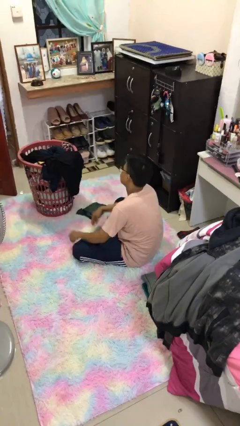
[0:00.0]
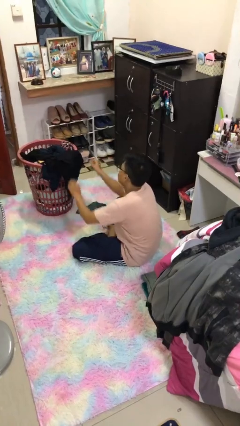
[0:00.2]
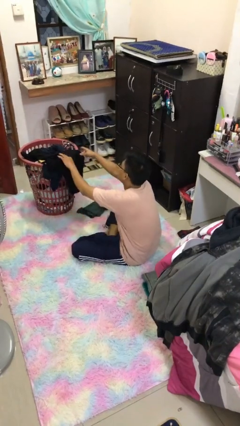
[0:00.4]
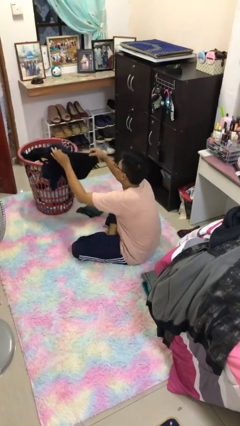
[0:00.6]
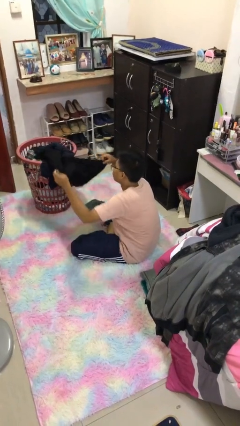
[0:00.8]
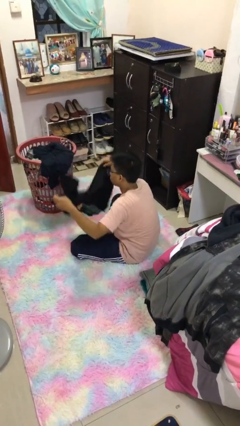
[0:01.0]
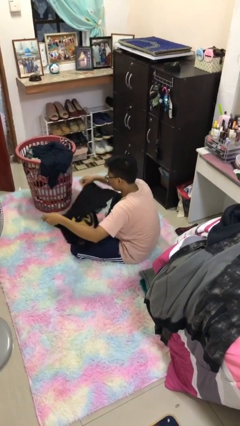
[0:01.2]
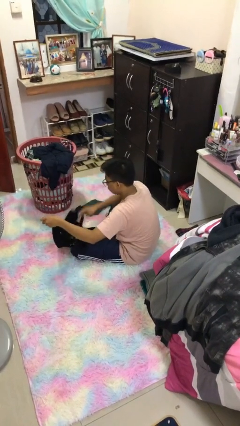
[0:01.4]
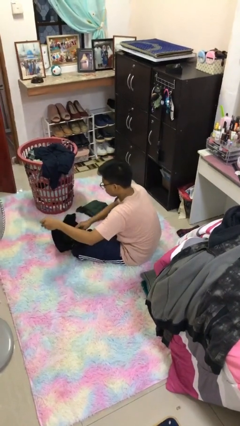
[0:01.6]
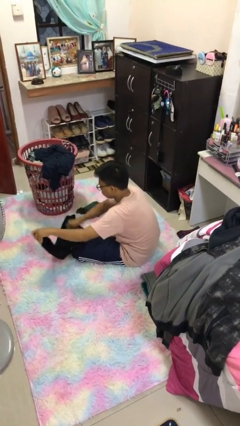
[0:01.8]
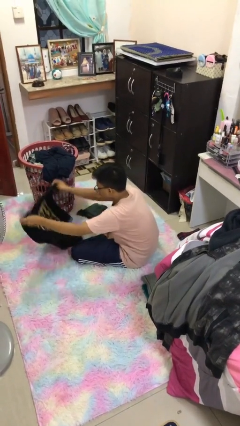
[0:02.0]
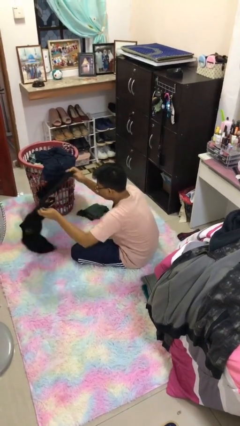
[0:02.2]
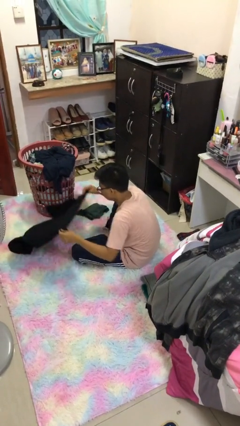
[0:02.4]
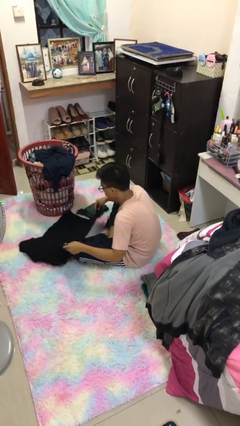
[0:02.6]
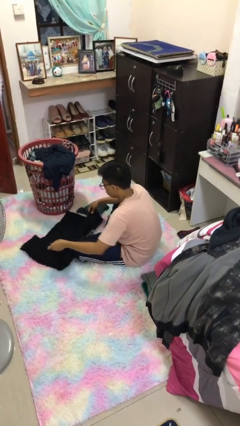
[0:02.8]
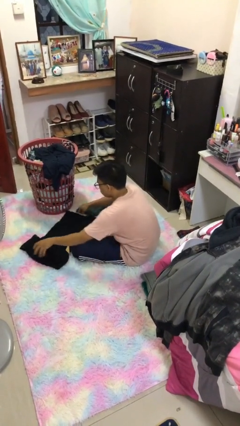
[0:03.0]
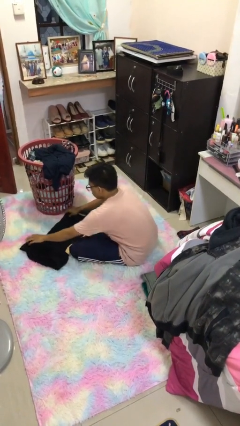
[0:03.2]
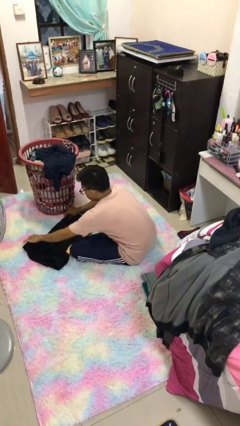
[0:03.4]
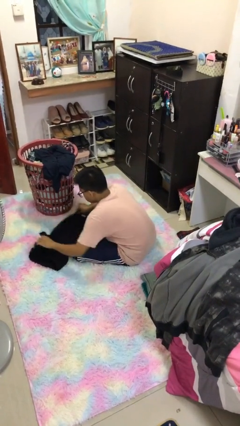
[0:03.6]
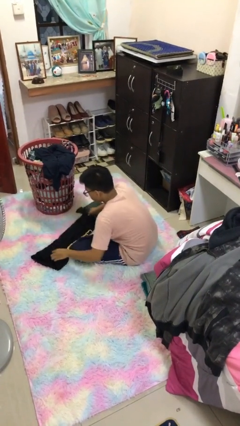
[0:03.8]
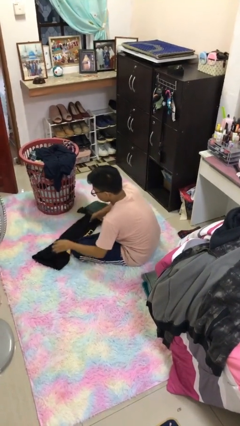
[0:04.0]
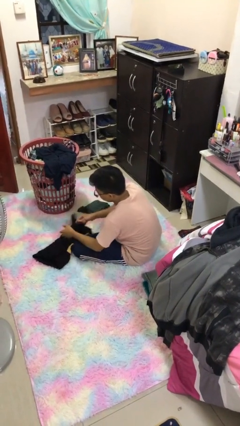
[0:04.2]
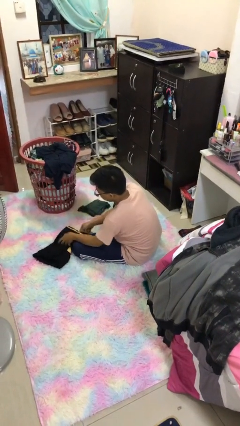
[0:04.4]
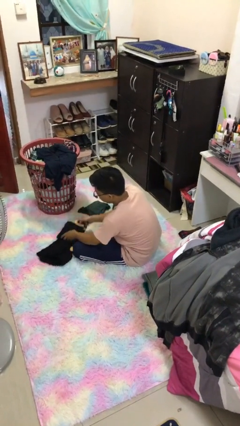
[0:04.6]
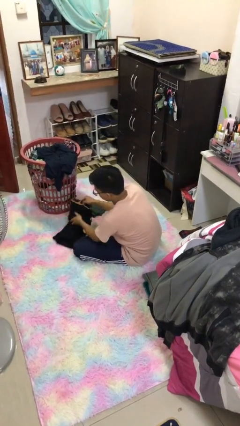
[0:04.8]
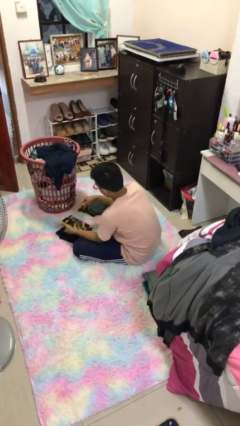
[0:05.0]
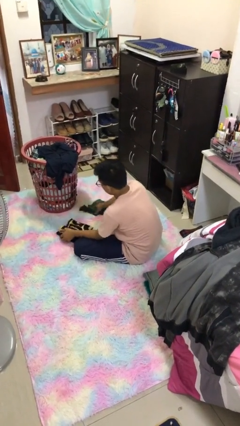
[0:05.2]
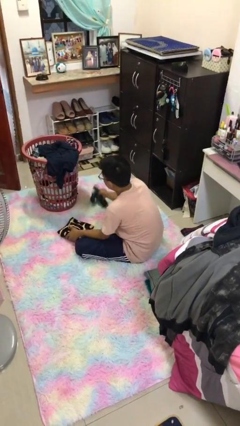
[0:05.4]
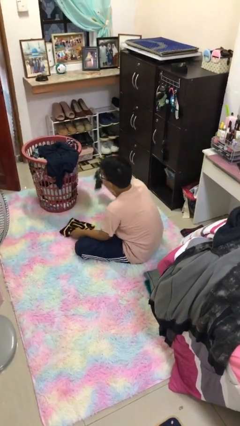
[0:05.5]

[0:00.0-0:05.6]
person folds shirt

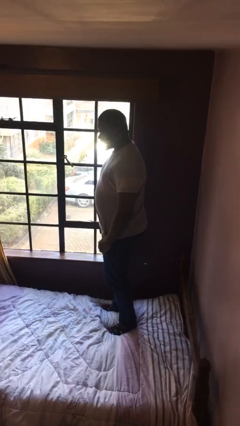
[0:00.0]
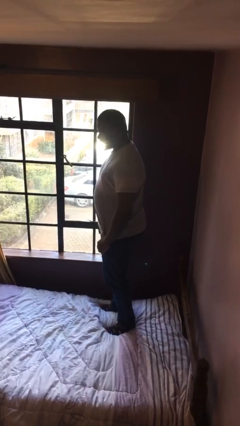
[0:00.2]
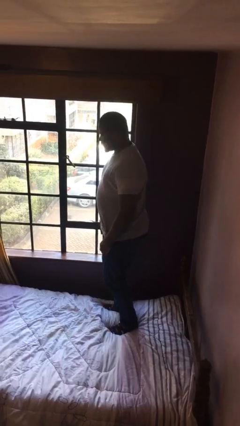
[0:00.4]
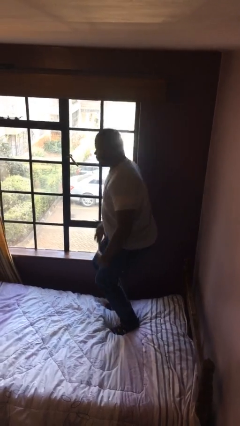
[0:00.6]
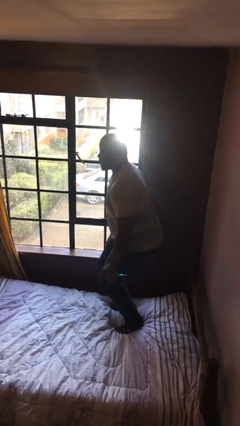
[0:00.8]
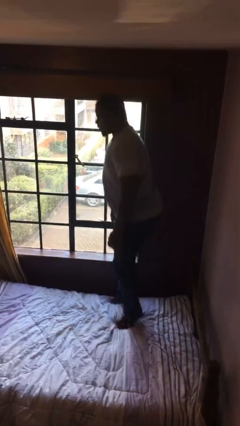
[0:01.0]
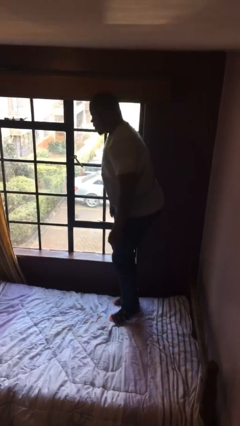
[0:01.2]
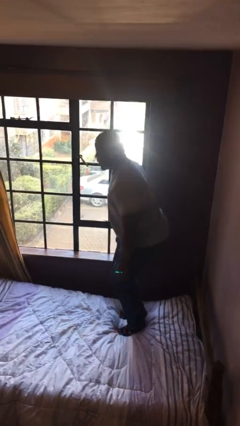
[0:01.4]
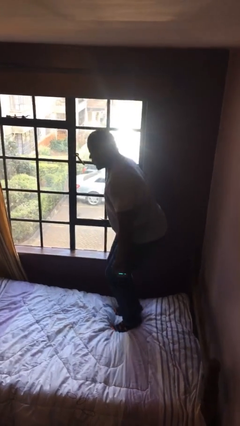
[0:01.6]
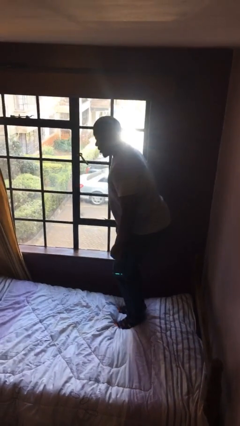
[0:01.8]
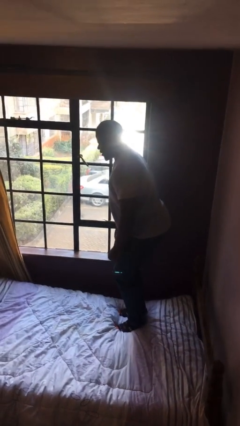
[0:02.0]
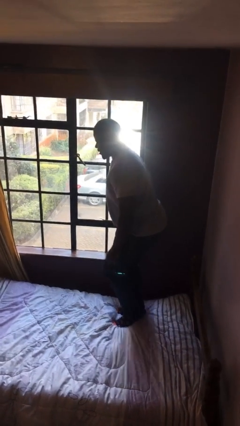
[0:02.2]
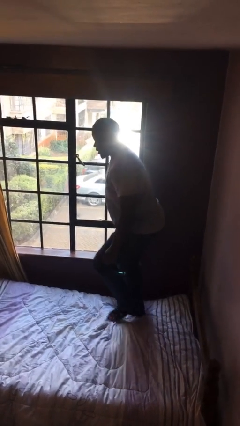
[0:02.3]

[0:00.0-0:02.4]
person jumps on bed

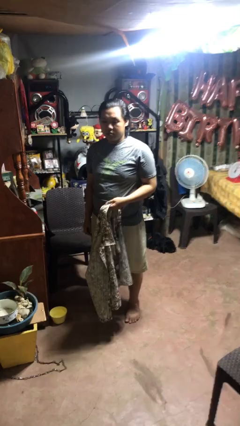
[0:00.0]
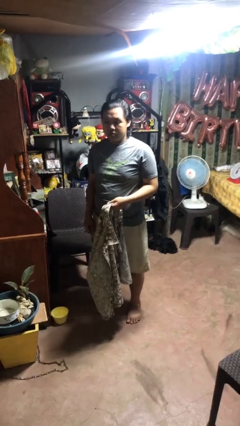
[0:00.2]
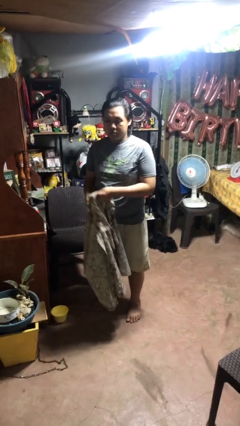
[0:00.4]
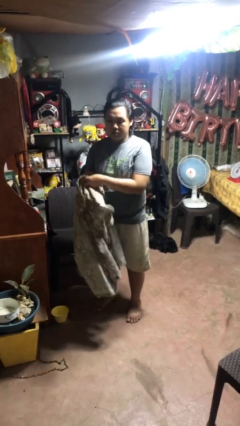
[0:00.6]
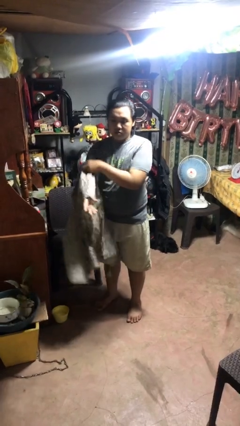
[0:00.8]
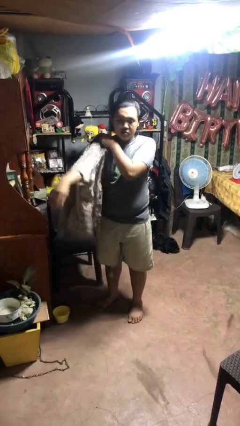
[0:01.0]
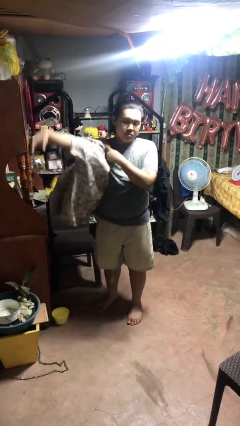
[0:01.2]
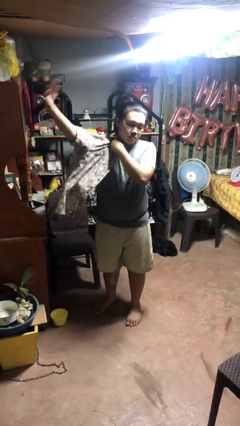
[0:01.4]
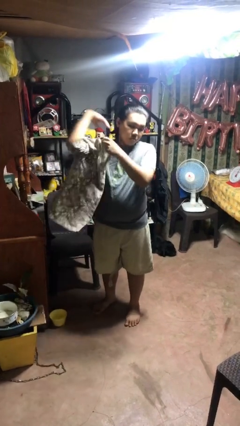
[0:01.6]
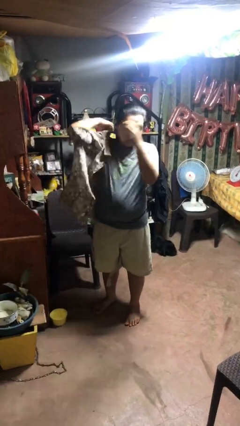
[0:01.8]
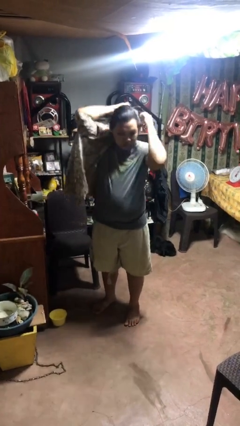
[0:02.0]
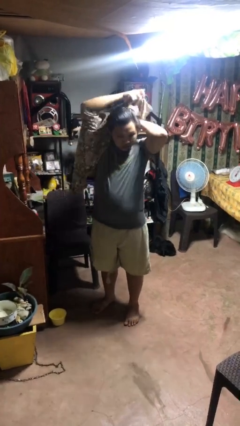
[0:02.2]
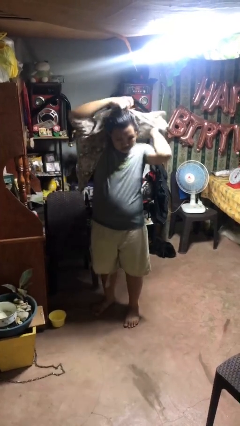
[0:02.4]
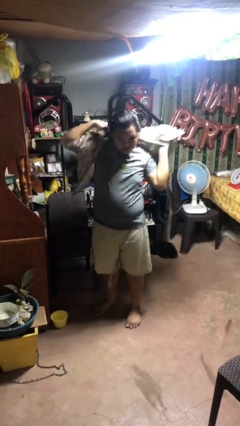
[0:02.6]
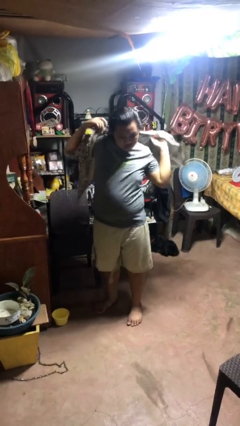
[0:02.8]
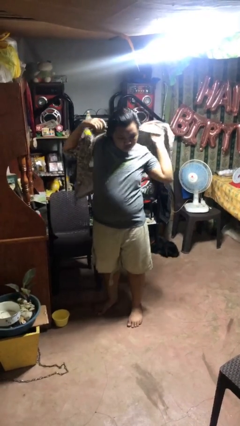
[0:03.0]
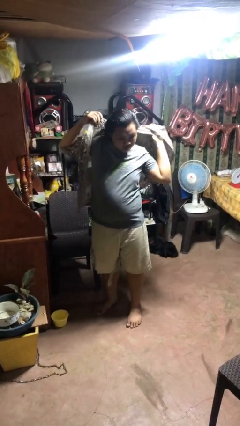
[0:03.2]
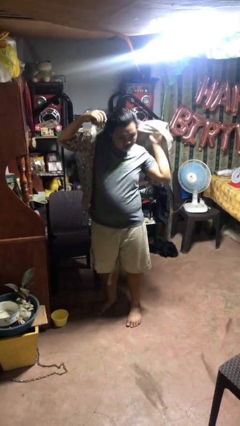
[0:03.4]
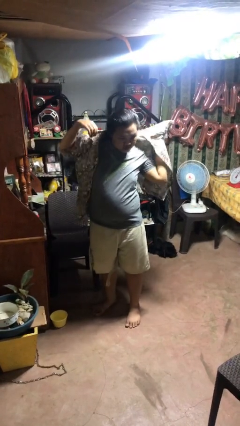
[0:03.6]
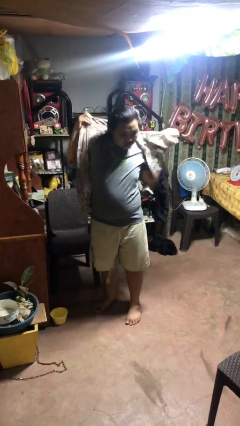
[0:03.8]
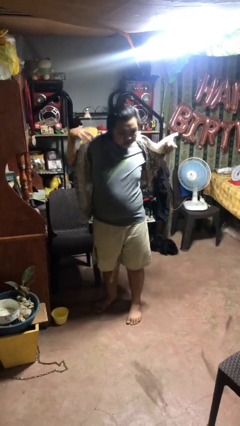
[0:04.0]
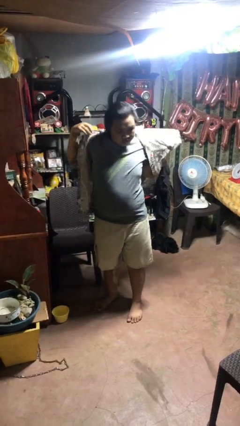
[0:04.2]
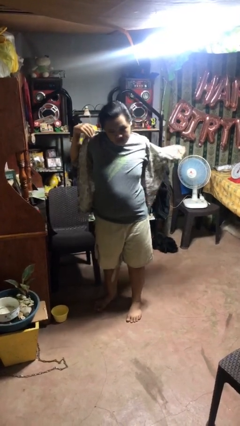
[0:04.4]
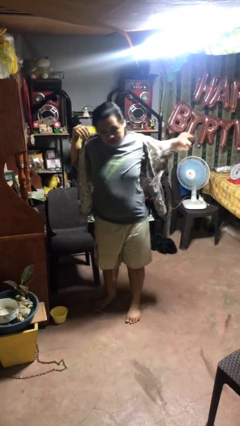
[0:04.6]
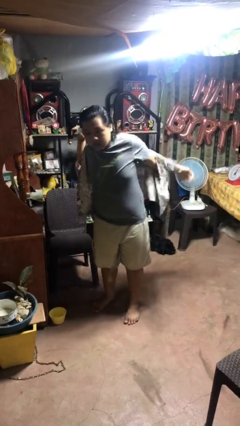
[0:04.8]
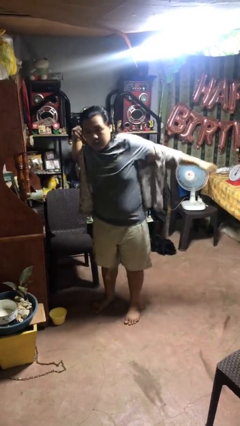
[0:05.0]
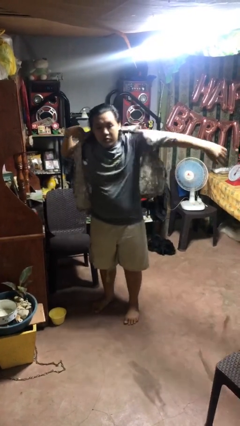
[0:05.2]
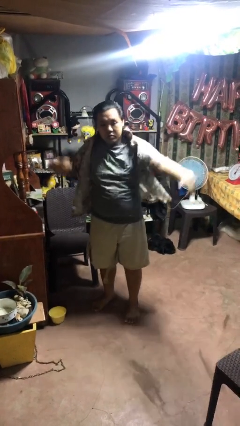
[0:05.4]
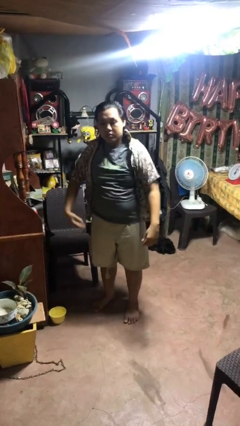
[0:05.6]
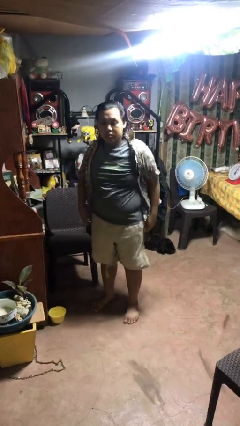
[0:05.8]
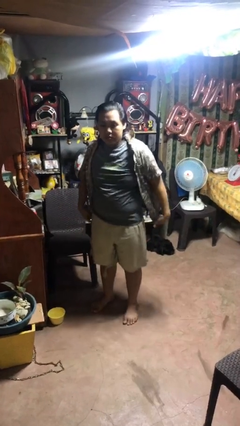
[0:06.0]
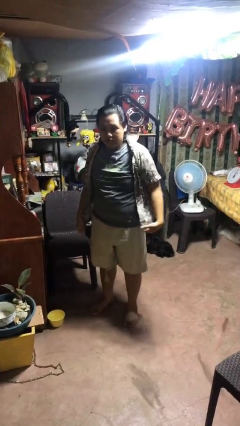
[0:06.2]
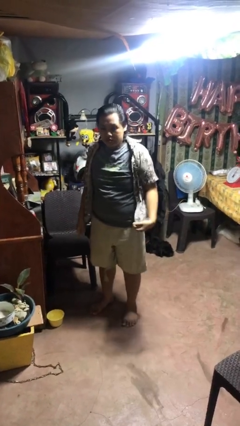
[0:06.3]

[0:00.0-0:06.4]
person puts on shirt

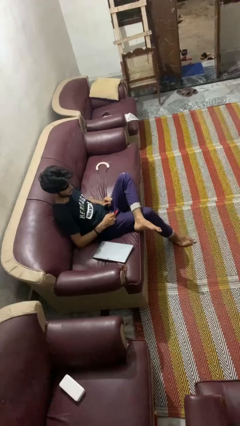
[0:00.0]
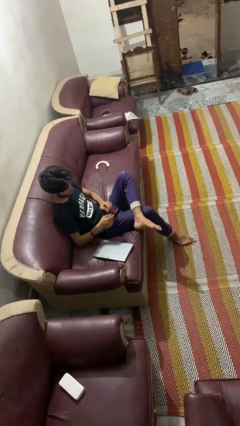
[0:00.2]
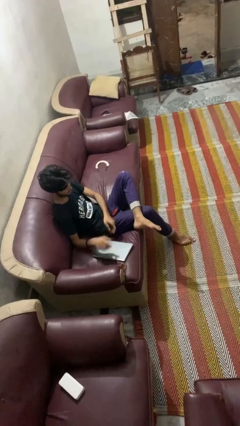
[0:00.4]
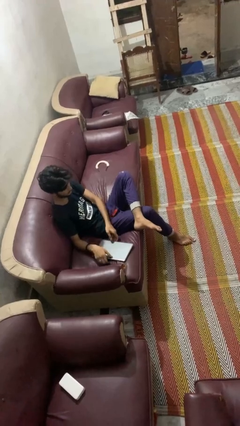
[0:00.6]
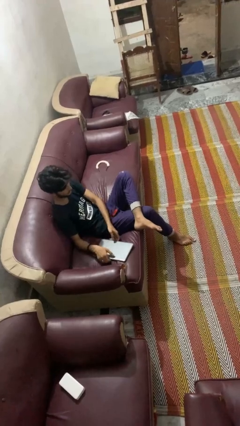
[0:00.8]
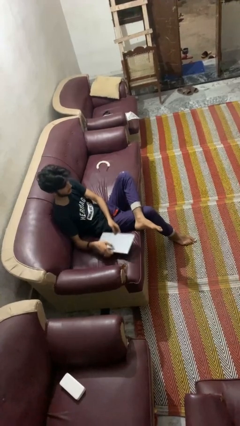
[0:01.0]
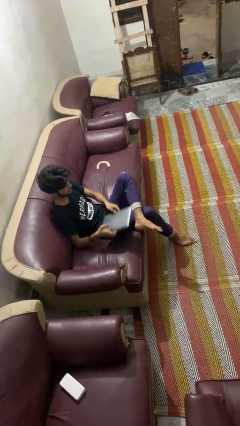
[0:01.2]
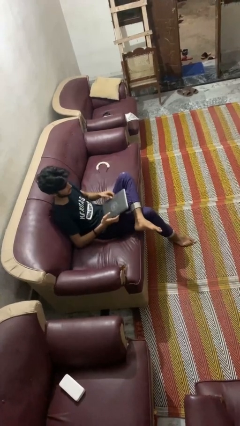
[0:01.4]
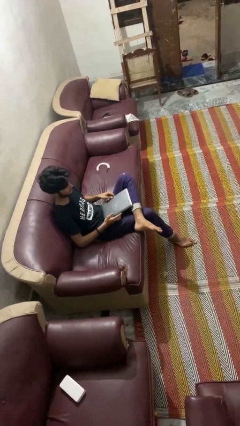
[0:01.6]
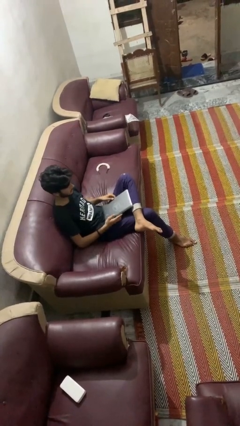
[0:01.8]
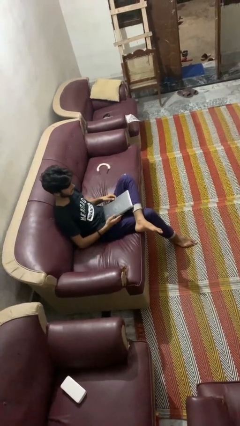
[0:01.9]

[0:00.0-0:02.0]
person picks up object from couch

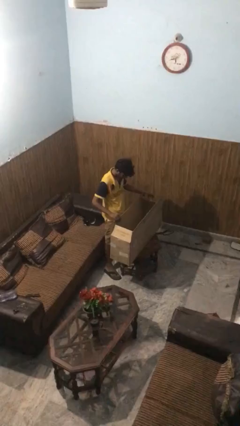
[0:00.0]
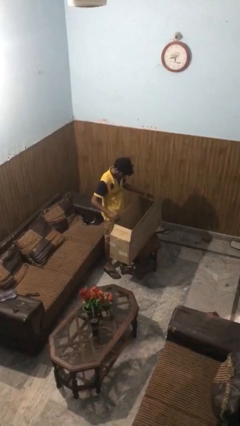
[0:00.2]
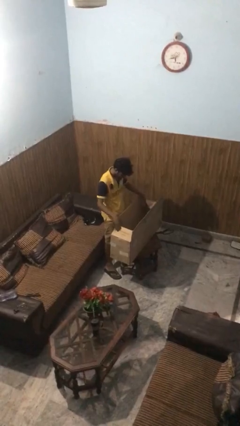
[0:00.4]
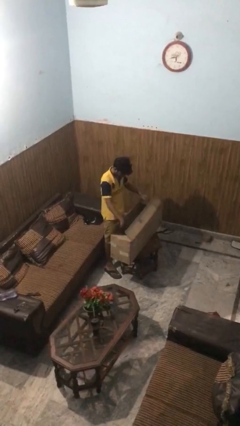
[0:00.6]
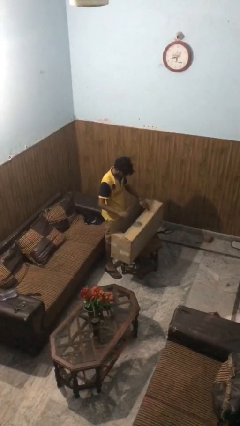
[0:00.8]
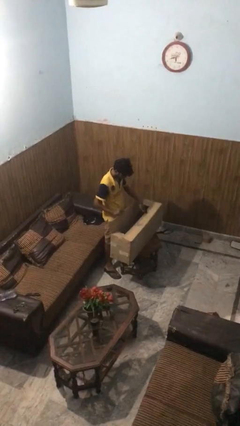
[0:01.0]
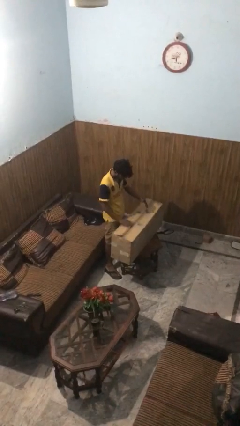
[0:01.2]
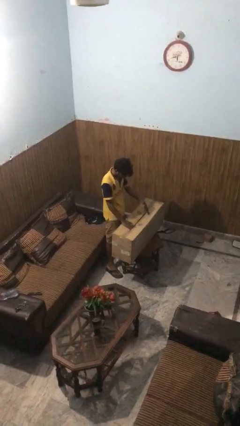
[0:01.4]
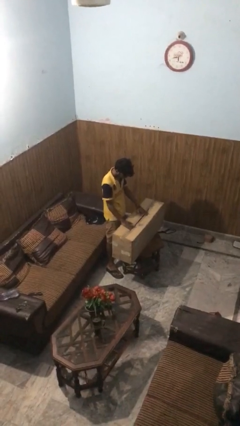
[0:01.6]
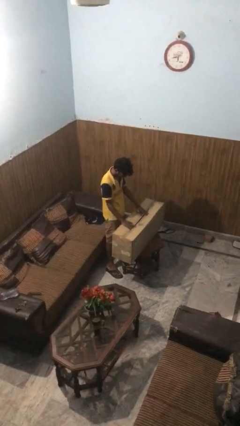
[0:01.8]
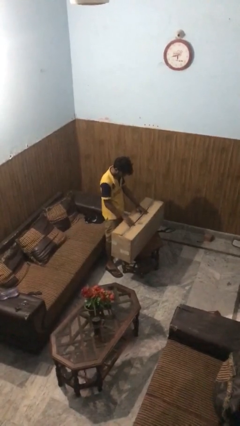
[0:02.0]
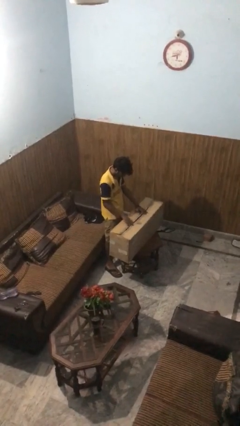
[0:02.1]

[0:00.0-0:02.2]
person closes box
